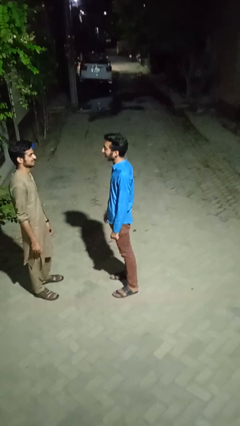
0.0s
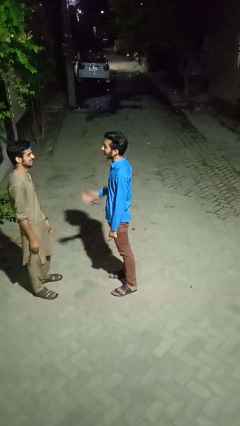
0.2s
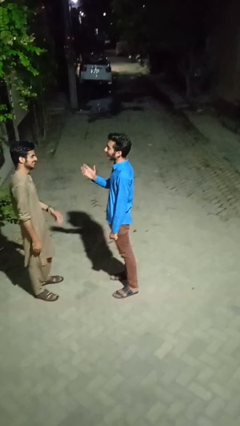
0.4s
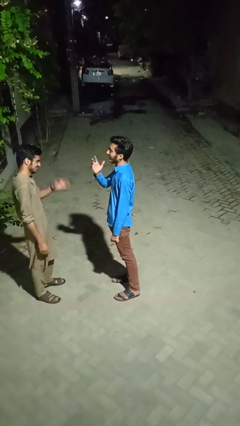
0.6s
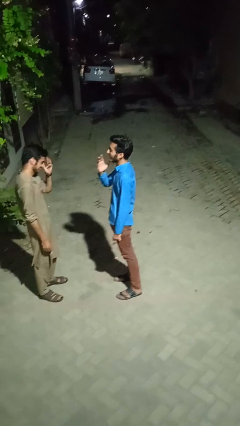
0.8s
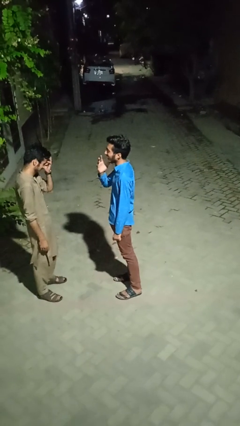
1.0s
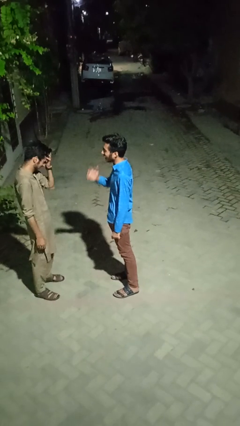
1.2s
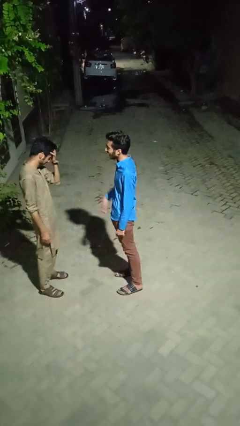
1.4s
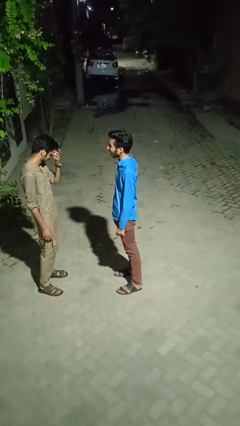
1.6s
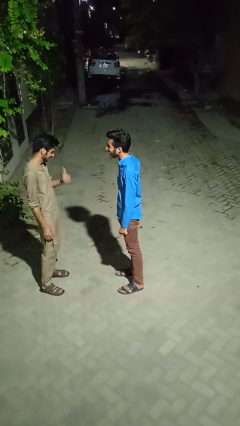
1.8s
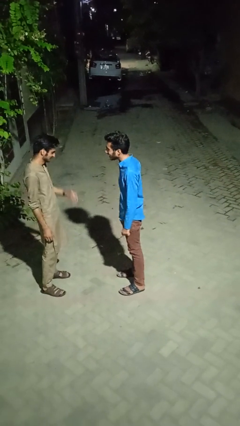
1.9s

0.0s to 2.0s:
person laughs with person

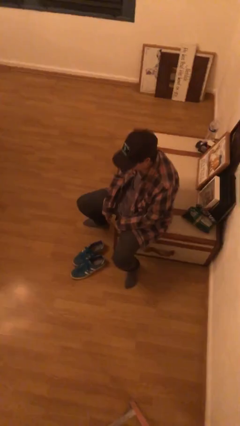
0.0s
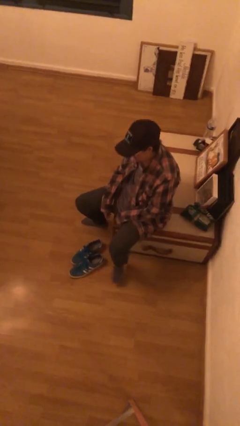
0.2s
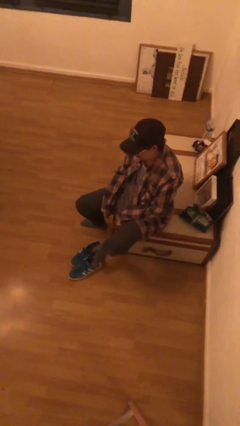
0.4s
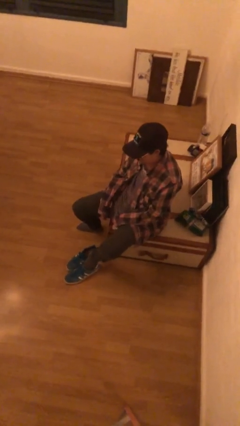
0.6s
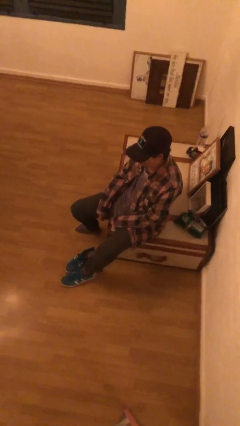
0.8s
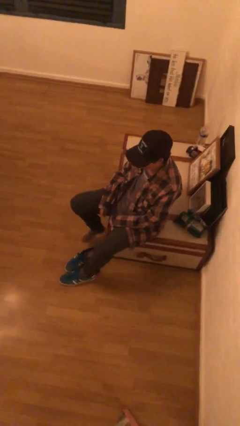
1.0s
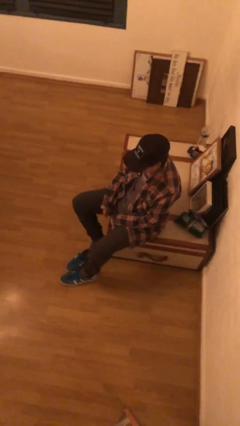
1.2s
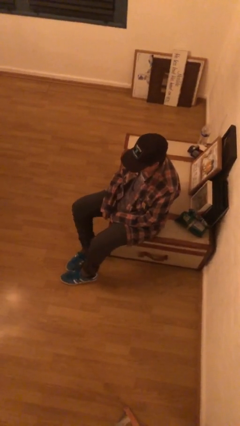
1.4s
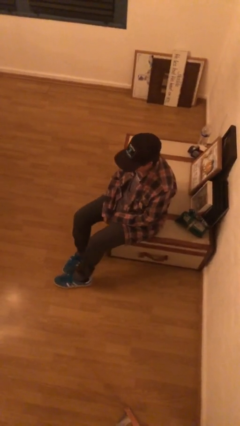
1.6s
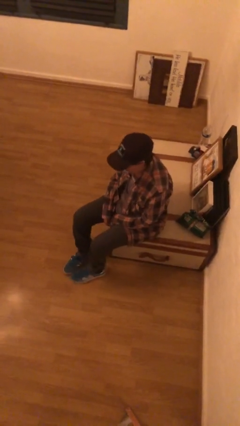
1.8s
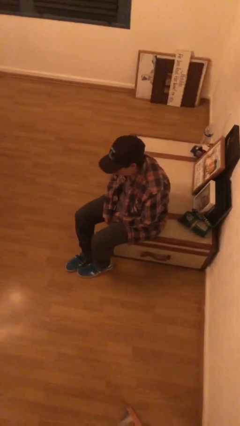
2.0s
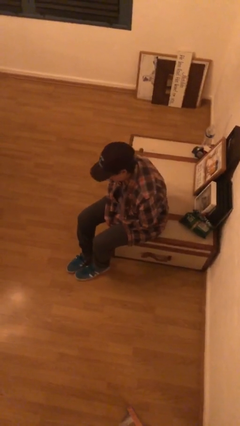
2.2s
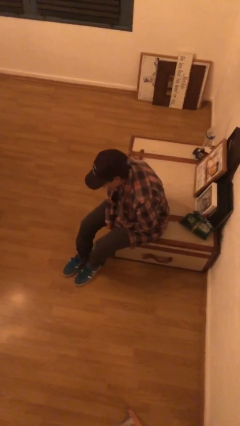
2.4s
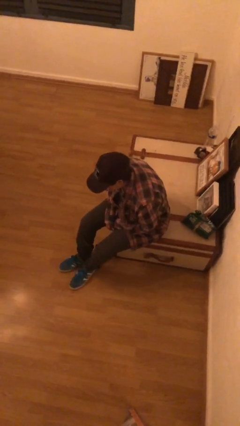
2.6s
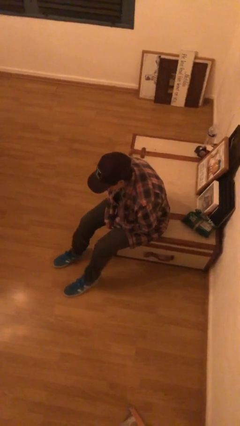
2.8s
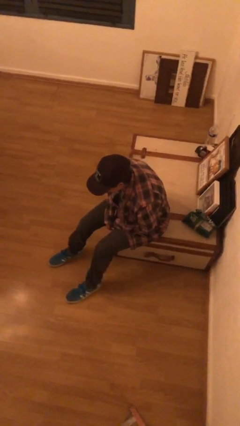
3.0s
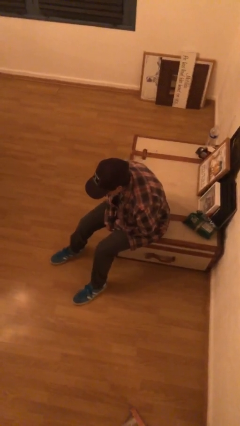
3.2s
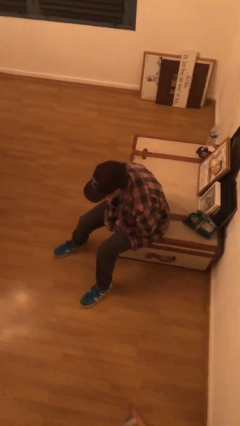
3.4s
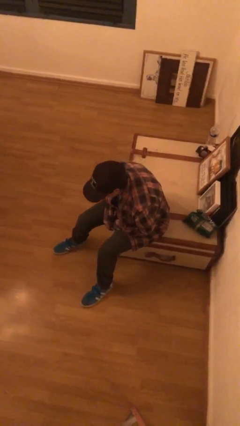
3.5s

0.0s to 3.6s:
person puts on shoes

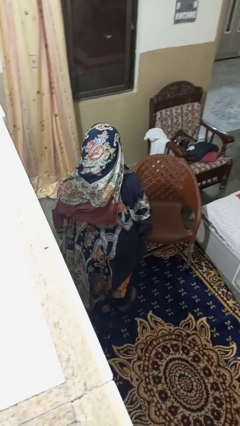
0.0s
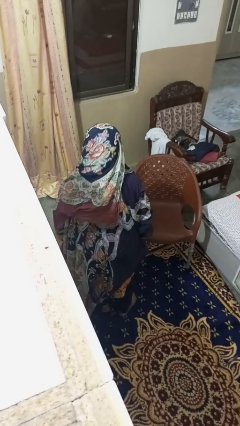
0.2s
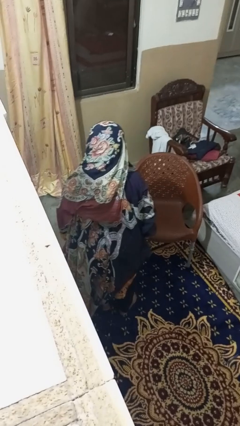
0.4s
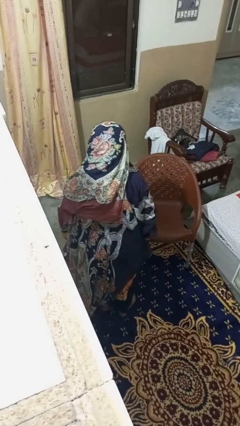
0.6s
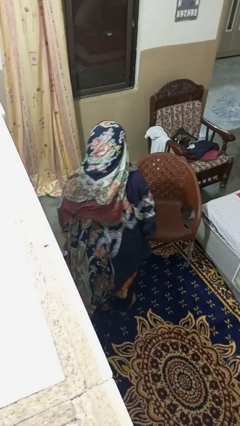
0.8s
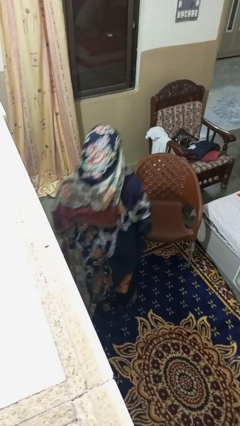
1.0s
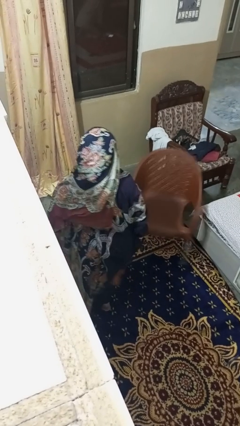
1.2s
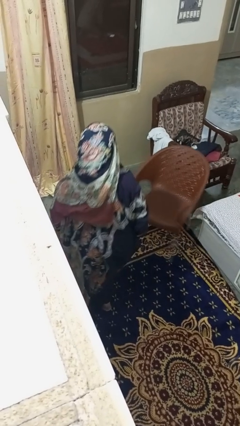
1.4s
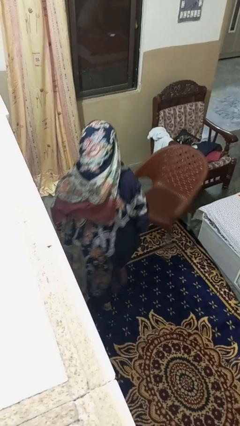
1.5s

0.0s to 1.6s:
person trips on object on floor

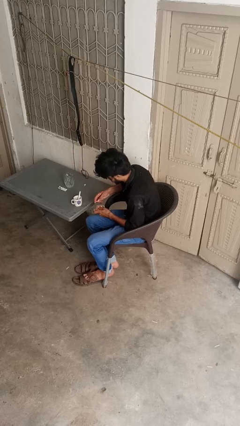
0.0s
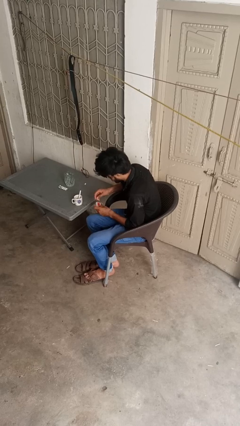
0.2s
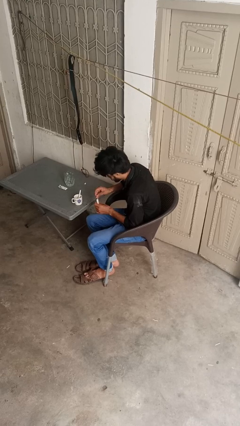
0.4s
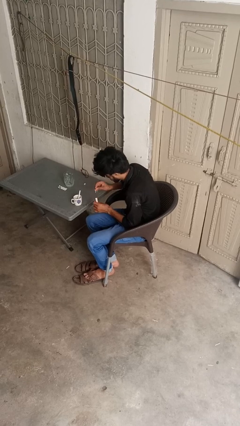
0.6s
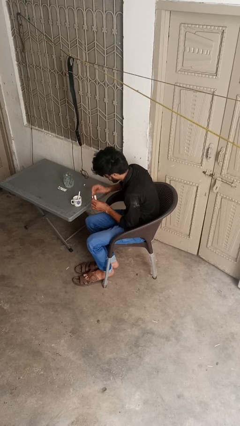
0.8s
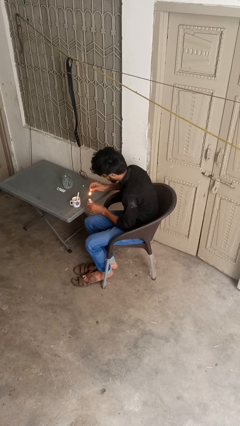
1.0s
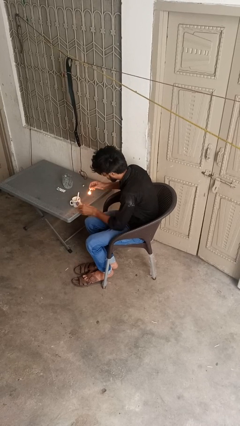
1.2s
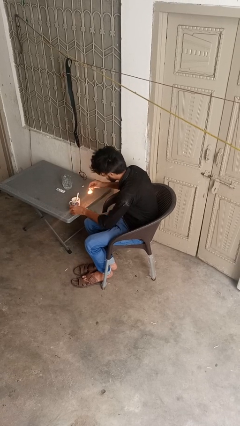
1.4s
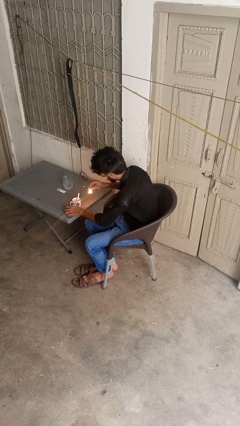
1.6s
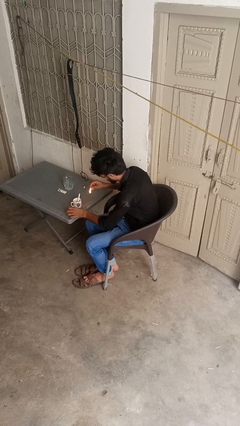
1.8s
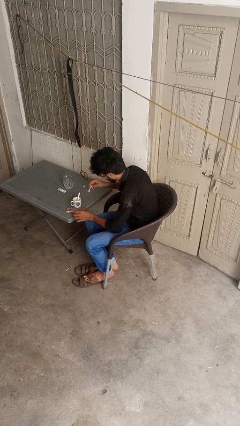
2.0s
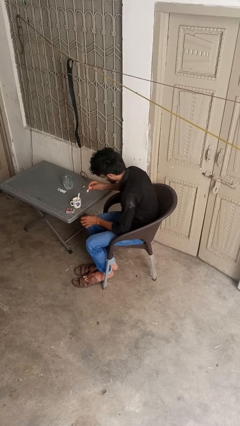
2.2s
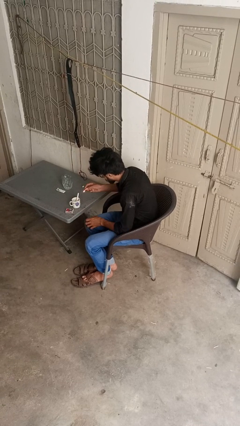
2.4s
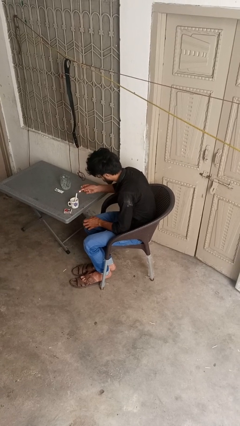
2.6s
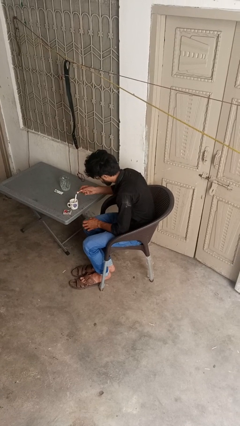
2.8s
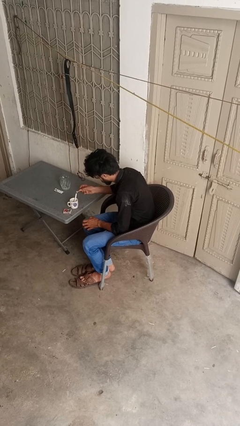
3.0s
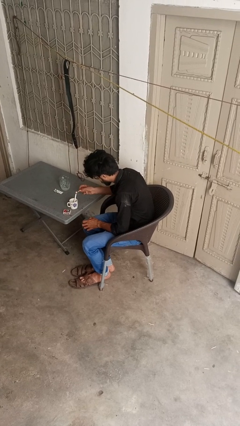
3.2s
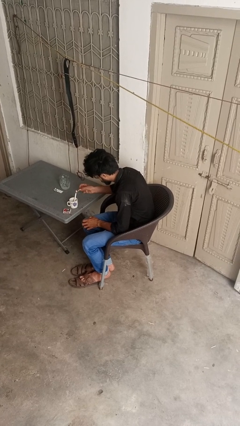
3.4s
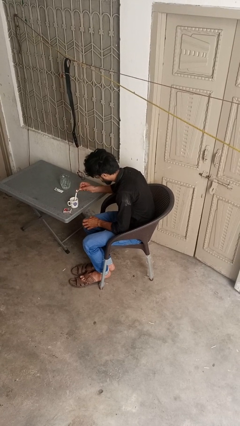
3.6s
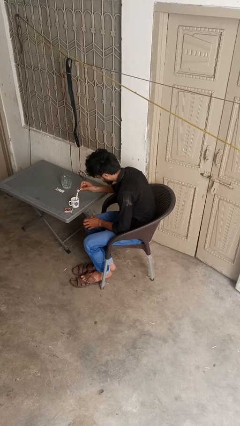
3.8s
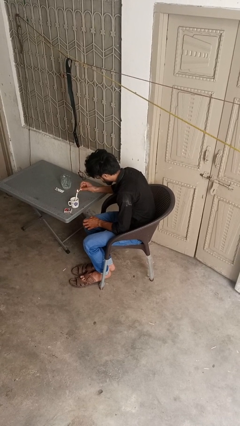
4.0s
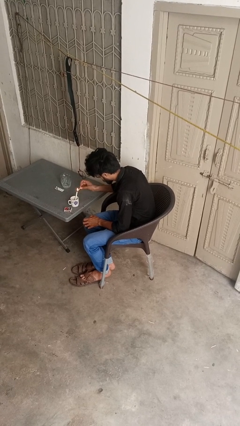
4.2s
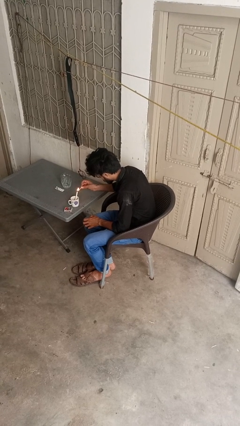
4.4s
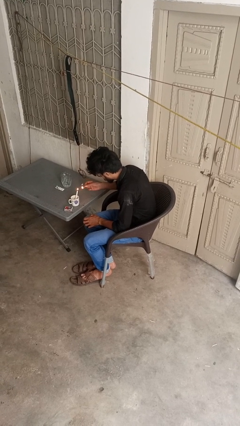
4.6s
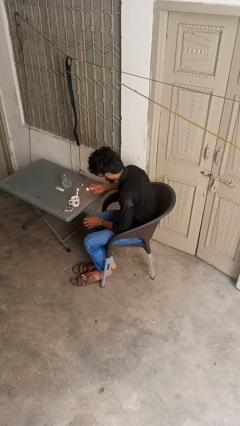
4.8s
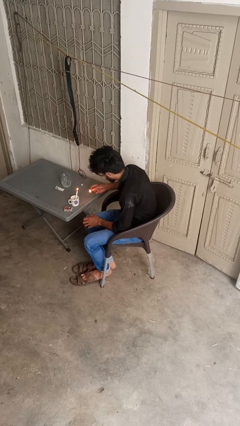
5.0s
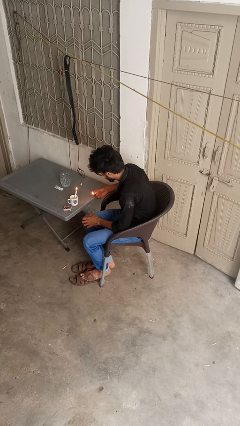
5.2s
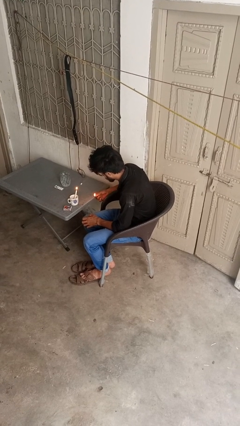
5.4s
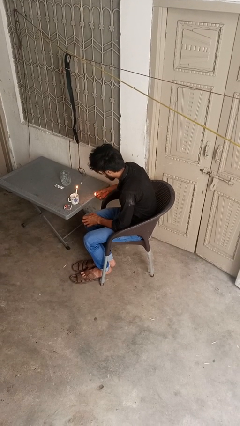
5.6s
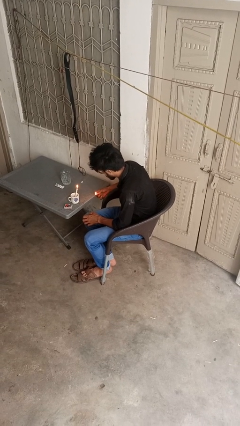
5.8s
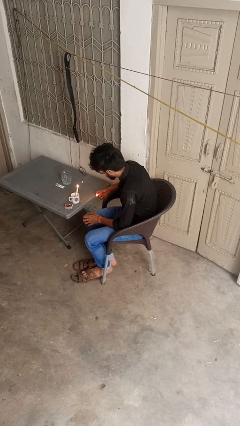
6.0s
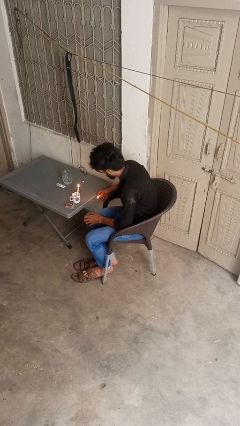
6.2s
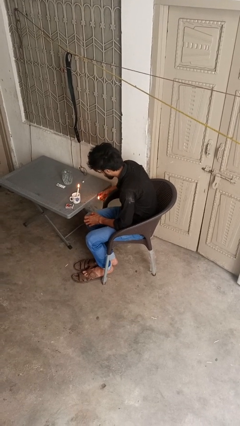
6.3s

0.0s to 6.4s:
person lights candle

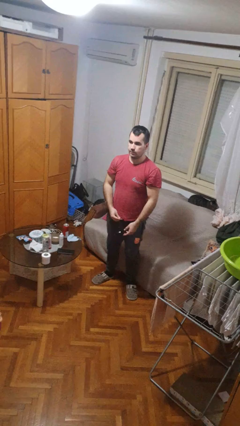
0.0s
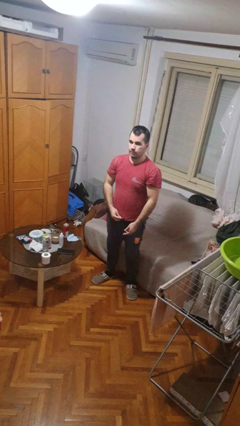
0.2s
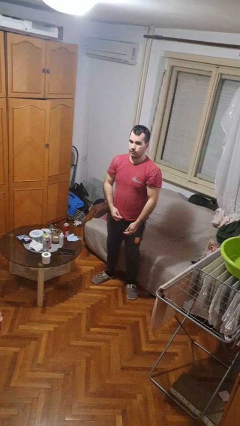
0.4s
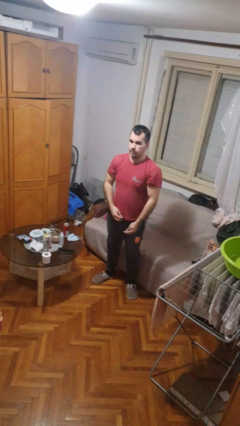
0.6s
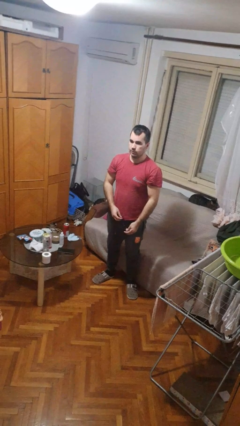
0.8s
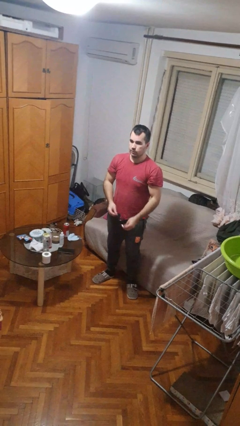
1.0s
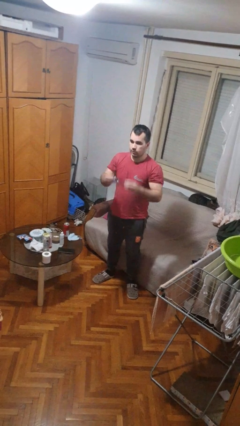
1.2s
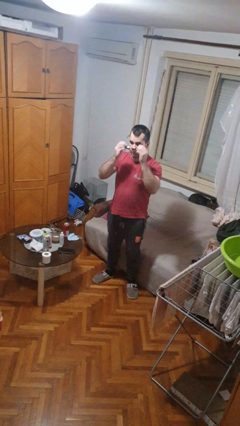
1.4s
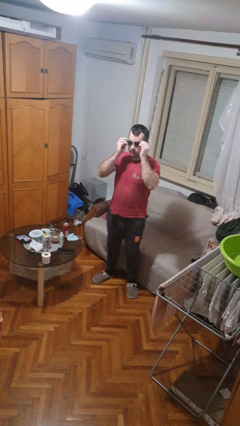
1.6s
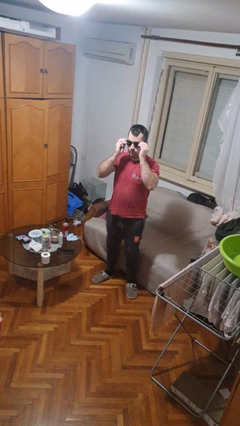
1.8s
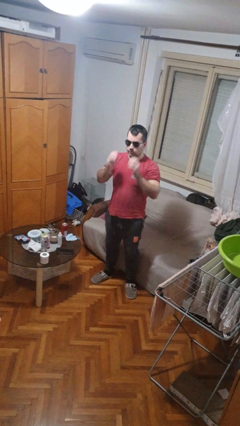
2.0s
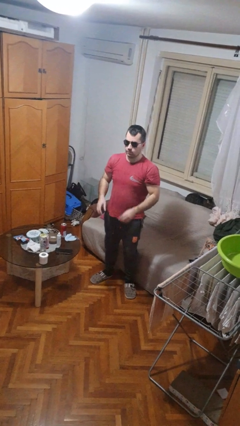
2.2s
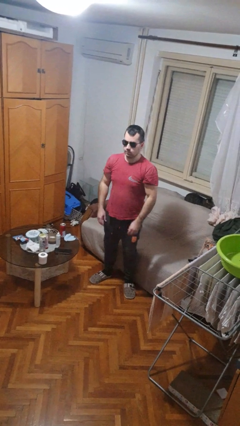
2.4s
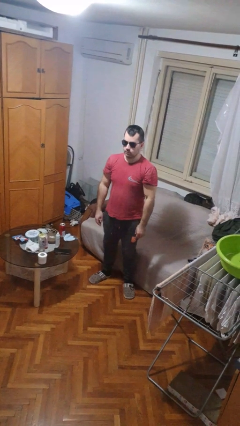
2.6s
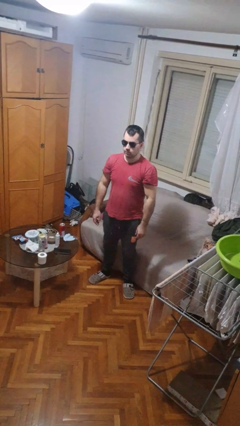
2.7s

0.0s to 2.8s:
person puts on sunglasses

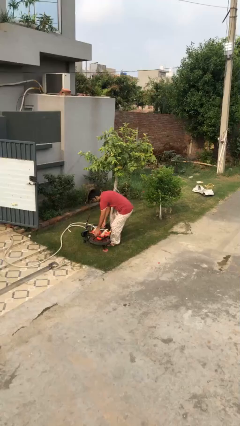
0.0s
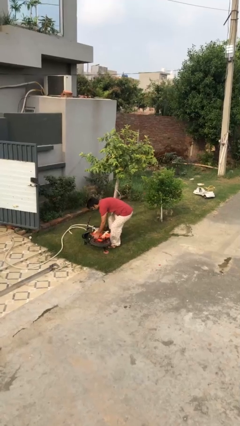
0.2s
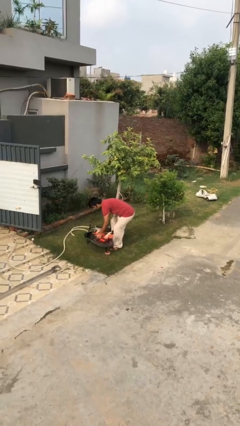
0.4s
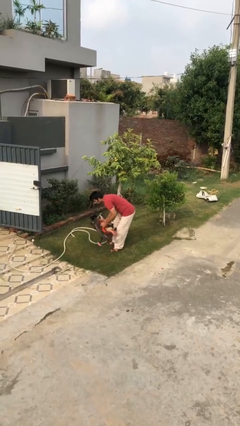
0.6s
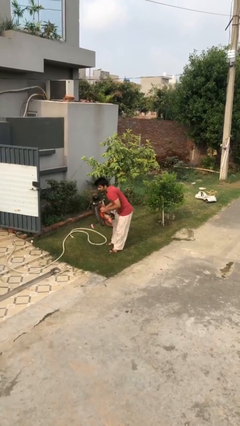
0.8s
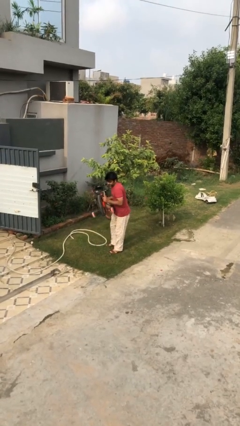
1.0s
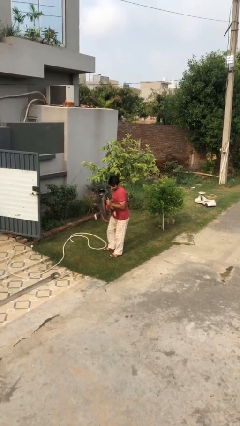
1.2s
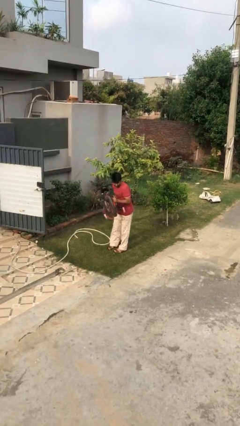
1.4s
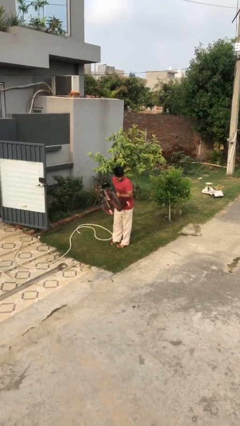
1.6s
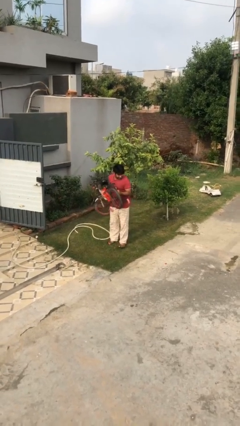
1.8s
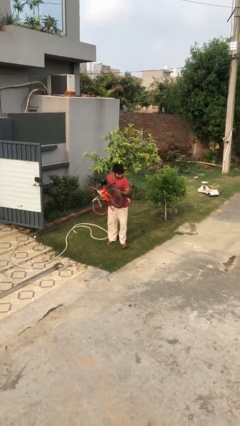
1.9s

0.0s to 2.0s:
person picks up object from floor
